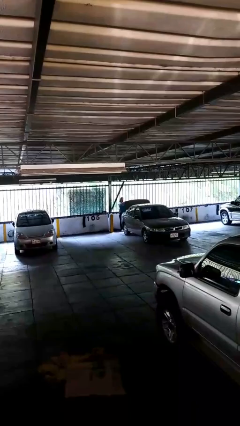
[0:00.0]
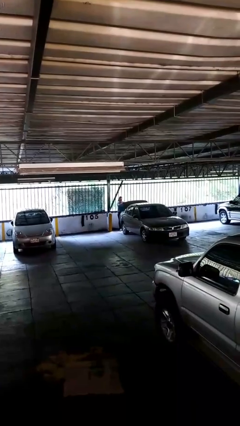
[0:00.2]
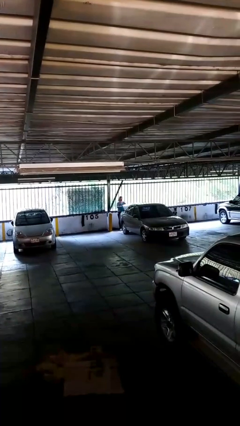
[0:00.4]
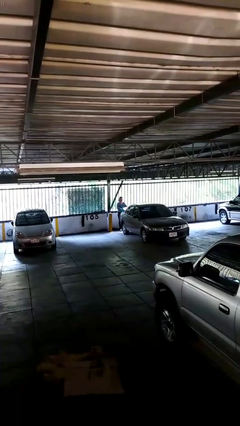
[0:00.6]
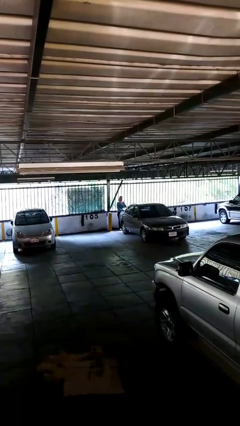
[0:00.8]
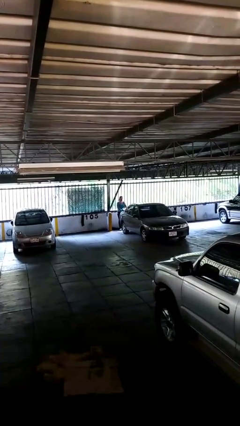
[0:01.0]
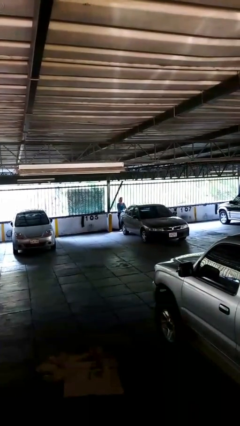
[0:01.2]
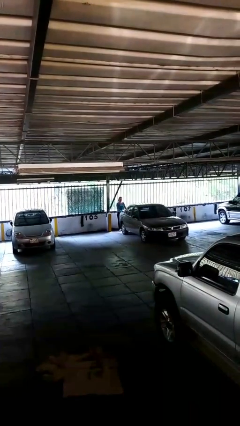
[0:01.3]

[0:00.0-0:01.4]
person closes car trunk

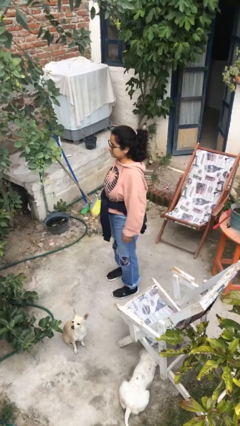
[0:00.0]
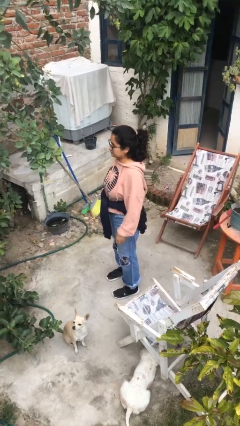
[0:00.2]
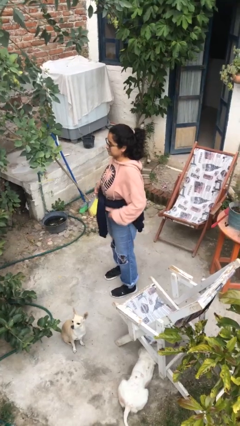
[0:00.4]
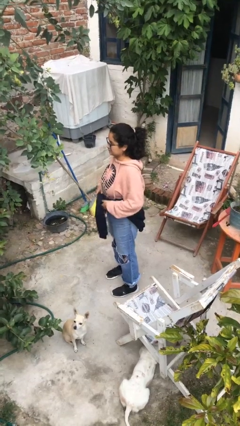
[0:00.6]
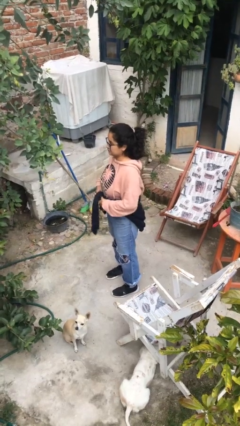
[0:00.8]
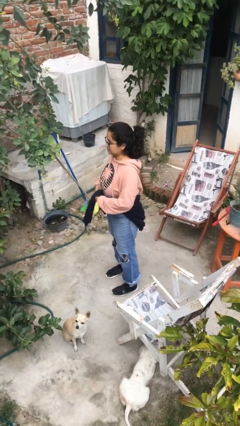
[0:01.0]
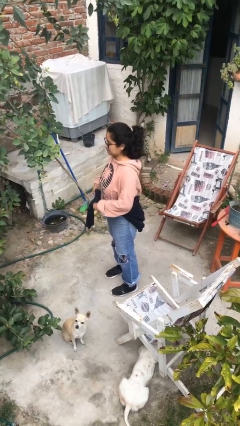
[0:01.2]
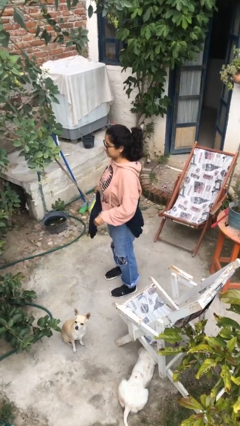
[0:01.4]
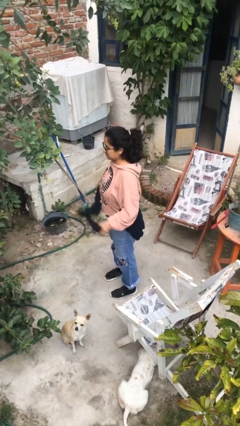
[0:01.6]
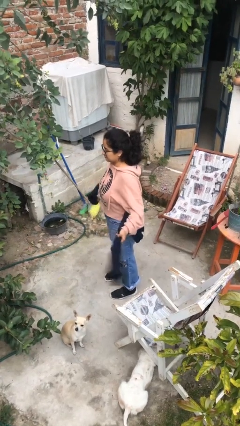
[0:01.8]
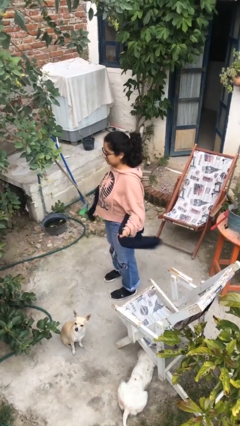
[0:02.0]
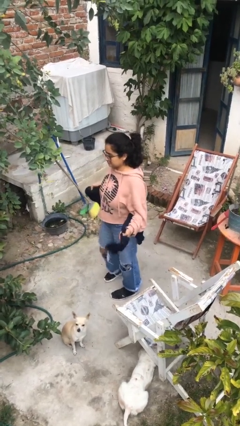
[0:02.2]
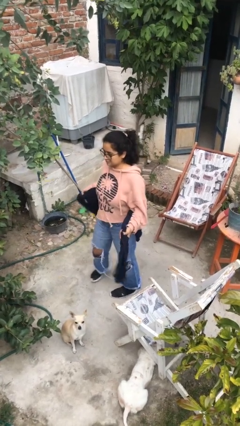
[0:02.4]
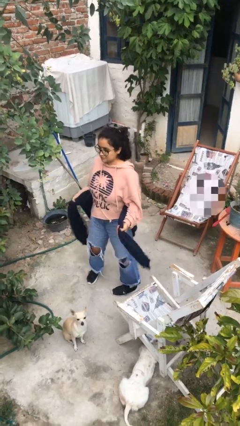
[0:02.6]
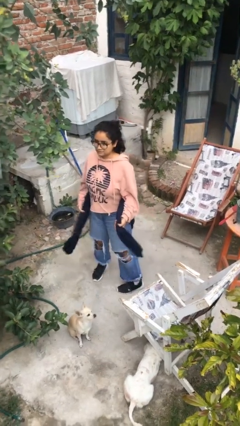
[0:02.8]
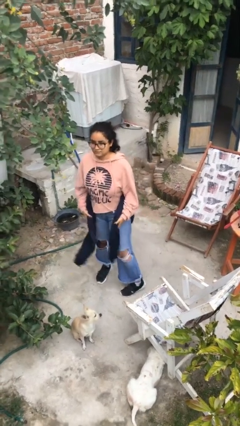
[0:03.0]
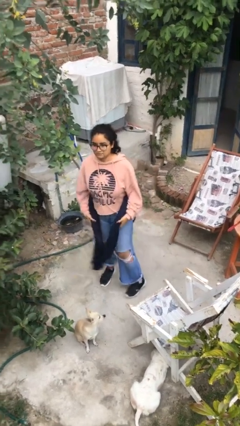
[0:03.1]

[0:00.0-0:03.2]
person unties jacket around waist

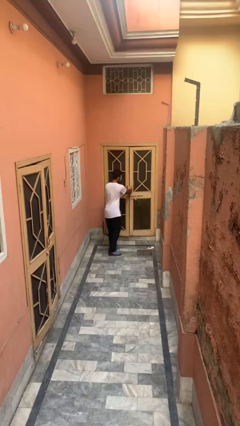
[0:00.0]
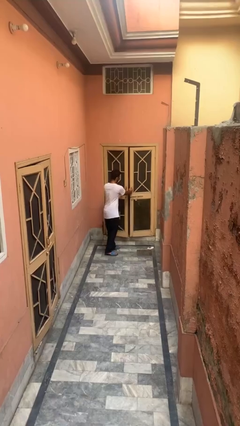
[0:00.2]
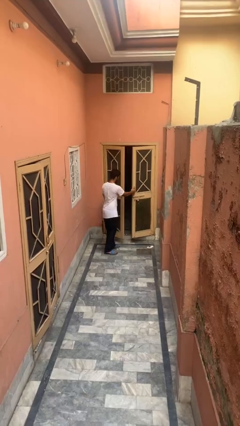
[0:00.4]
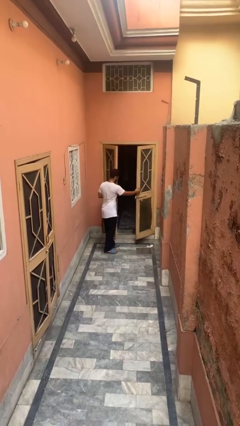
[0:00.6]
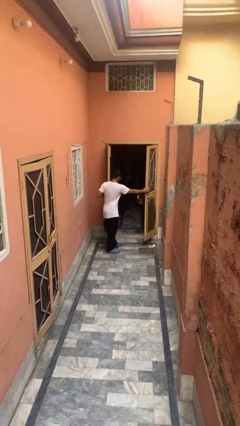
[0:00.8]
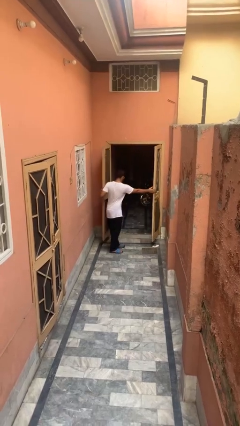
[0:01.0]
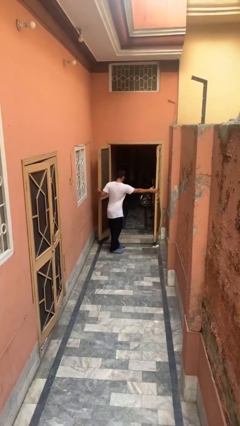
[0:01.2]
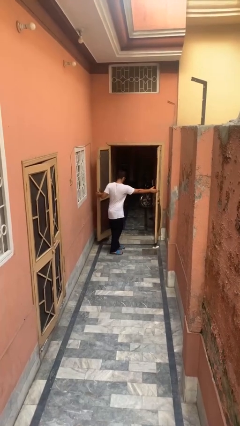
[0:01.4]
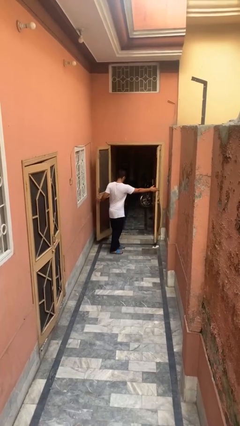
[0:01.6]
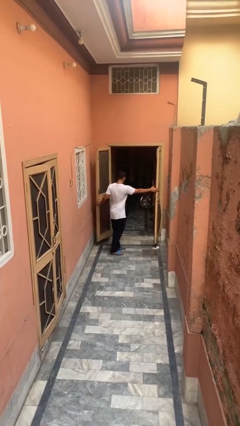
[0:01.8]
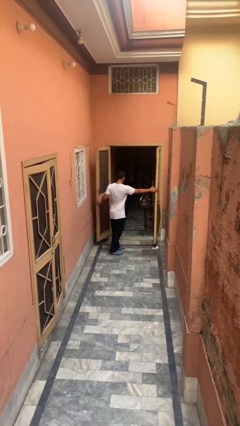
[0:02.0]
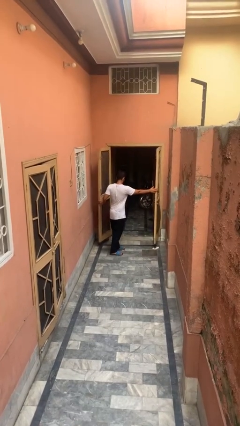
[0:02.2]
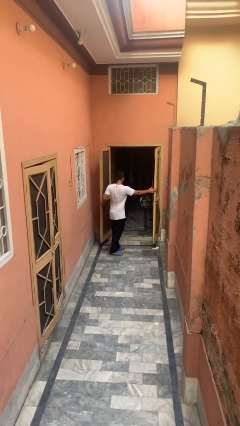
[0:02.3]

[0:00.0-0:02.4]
person opens gate

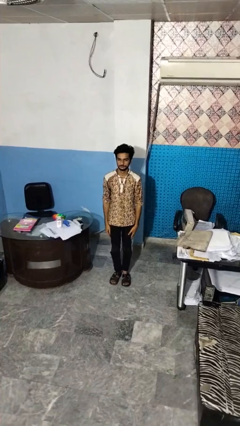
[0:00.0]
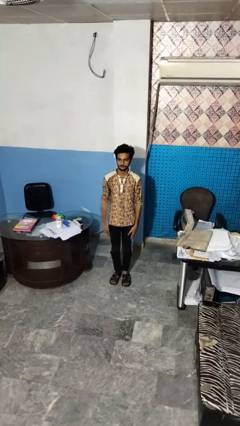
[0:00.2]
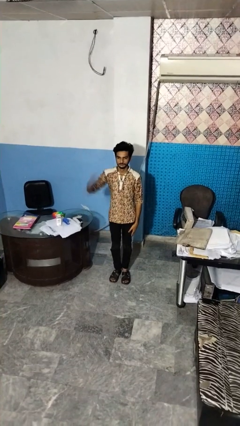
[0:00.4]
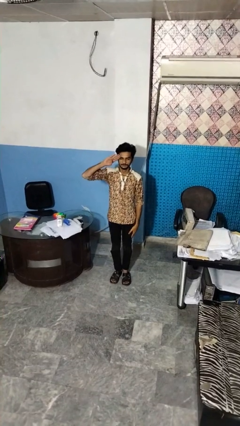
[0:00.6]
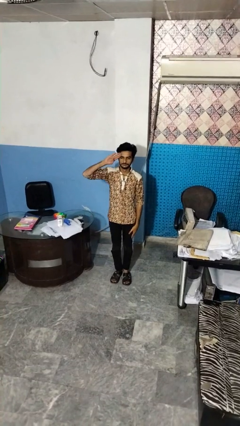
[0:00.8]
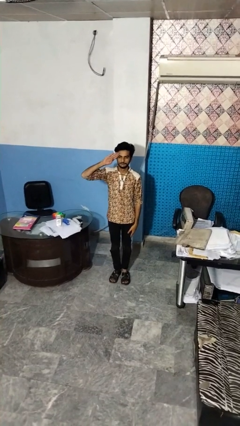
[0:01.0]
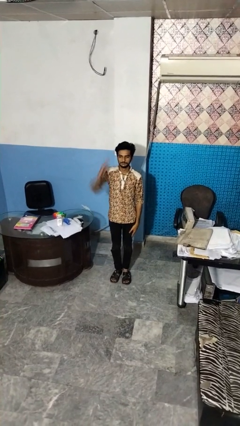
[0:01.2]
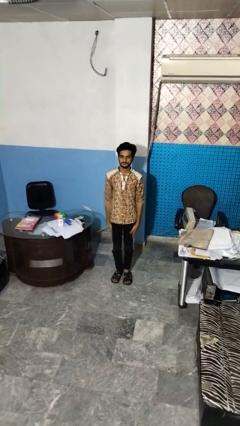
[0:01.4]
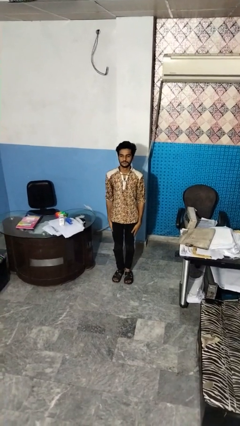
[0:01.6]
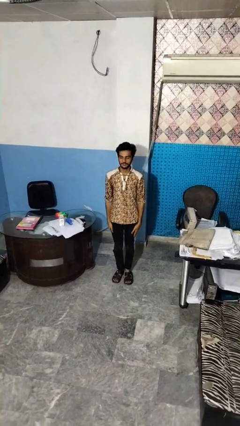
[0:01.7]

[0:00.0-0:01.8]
person salutes

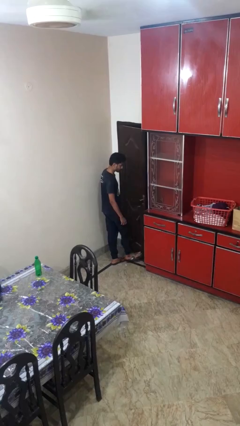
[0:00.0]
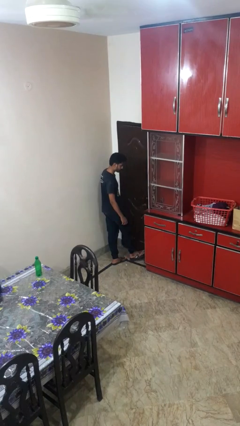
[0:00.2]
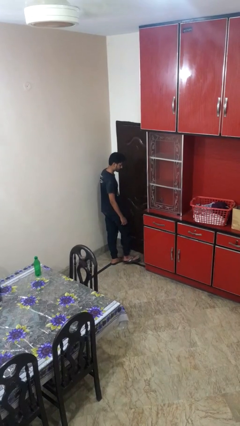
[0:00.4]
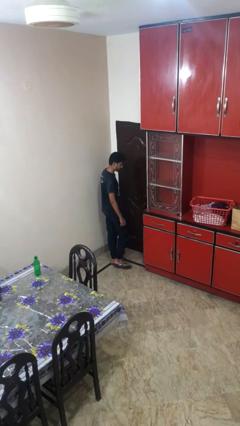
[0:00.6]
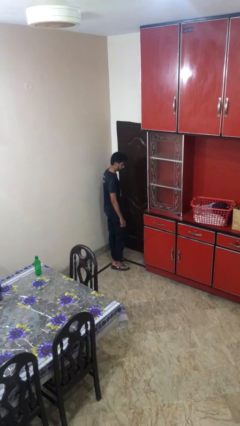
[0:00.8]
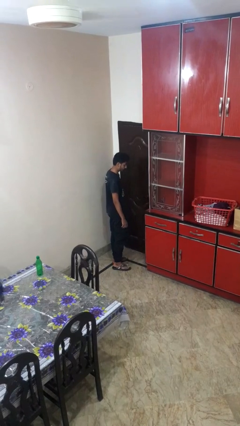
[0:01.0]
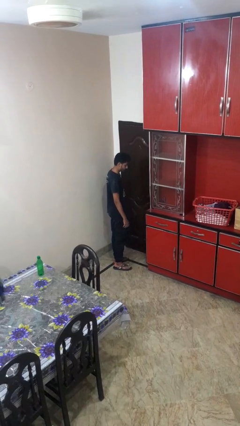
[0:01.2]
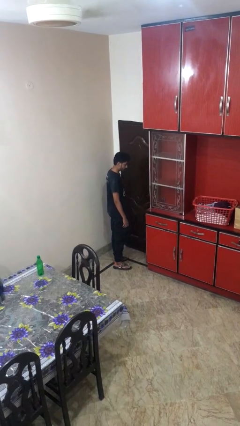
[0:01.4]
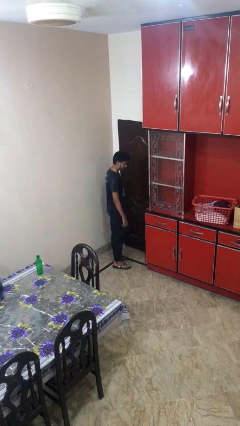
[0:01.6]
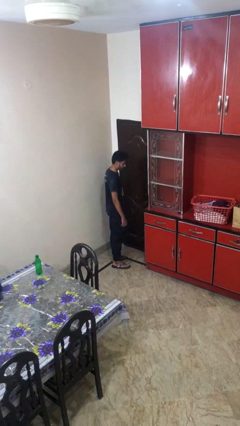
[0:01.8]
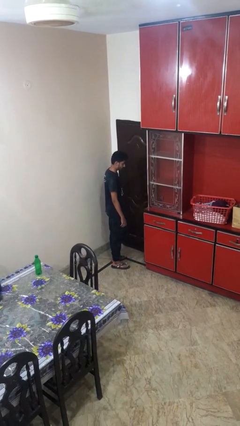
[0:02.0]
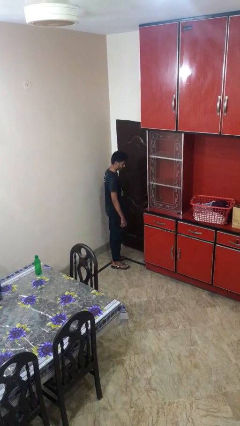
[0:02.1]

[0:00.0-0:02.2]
person closes door with foot

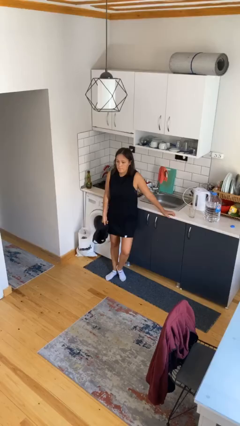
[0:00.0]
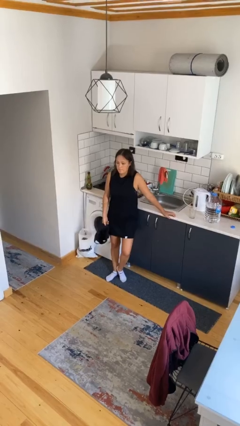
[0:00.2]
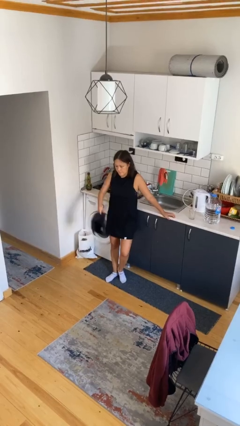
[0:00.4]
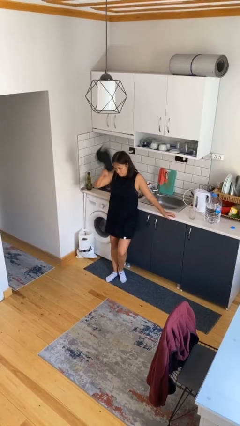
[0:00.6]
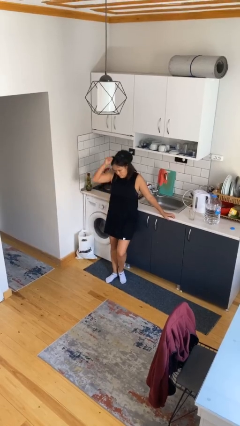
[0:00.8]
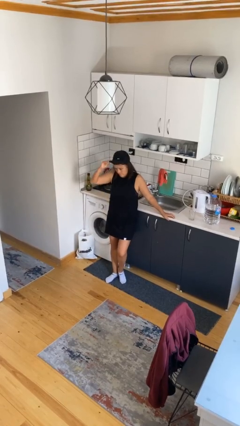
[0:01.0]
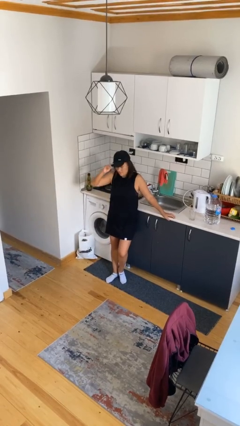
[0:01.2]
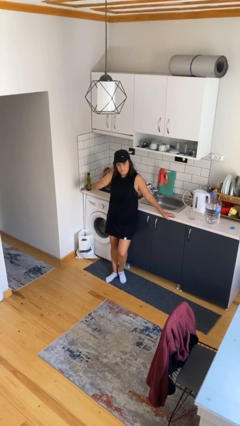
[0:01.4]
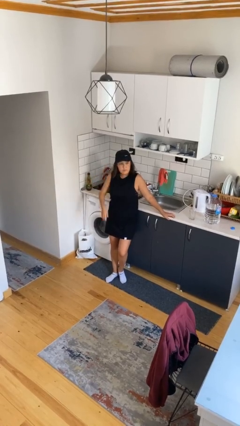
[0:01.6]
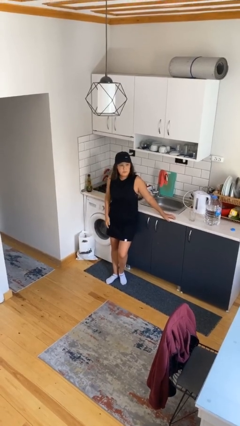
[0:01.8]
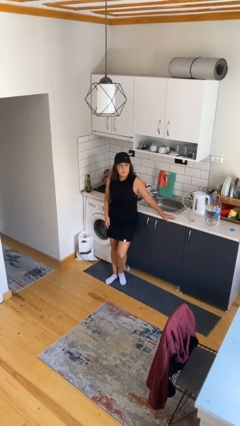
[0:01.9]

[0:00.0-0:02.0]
person puts on hat

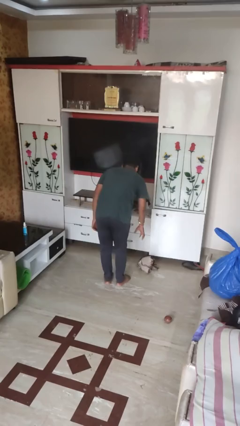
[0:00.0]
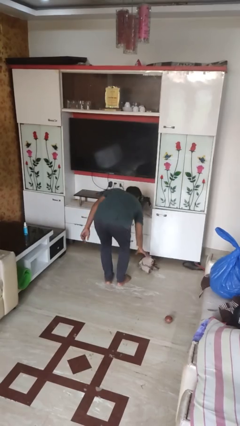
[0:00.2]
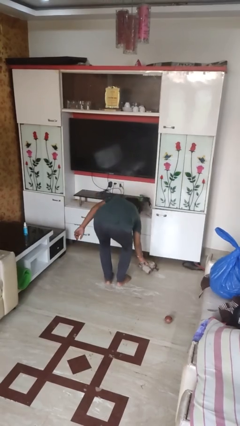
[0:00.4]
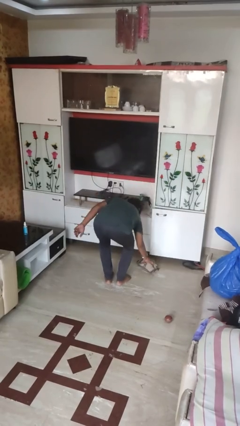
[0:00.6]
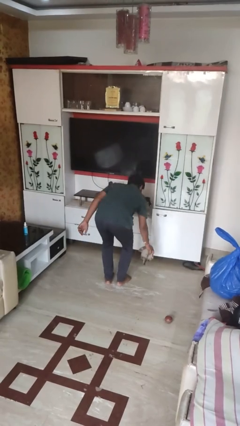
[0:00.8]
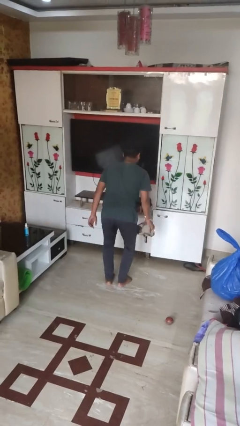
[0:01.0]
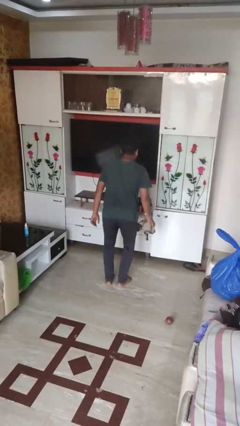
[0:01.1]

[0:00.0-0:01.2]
person picks up object from floor

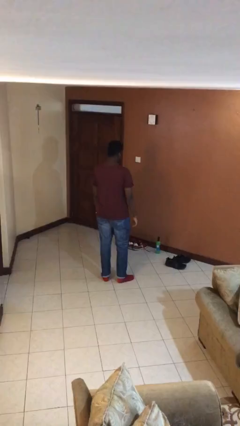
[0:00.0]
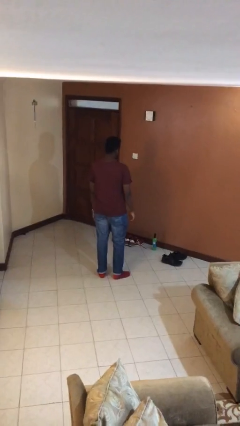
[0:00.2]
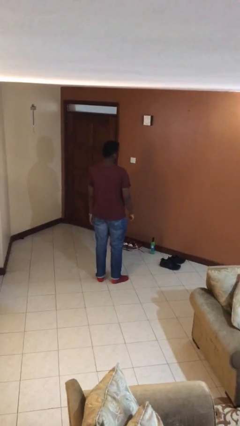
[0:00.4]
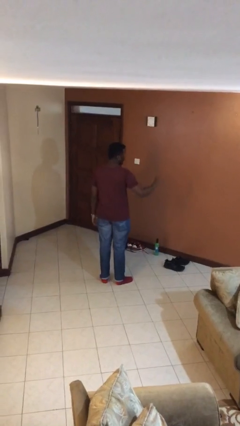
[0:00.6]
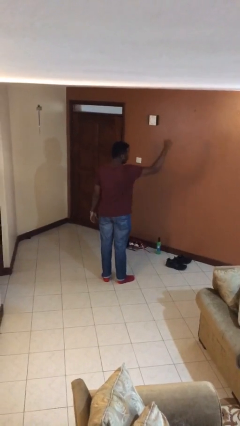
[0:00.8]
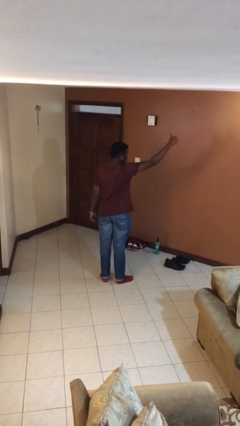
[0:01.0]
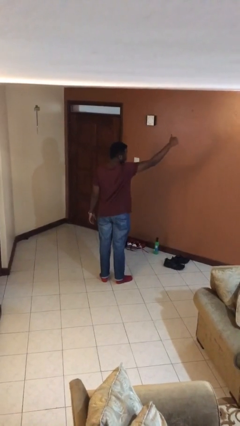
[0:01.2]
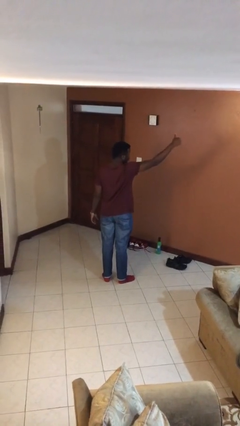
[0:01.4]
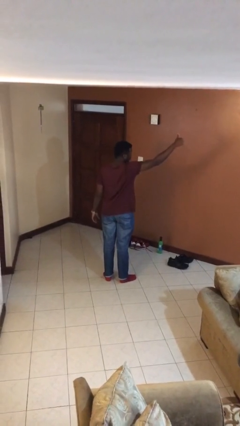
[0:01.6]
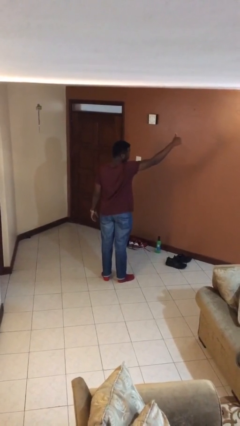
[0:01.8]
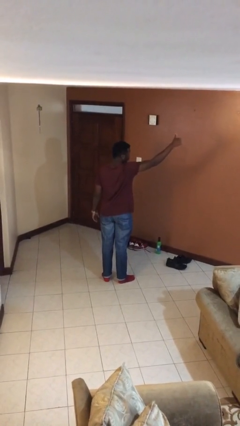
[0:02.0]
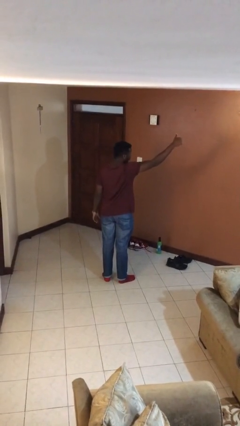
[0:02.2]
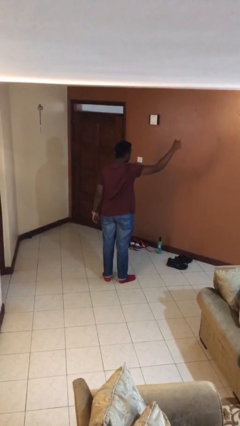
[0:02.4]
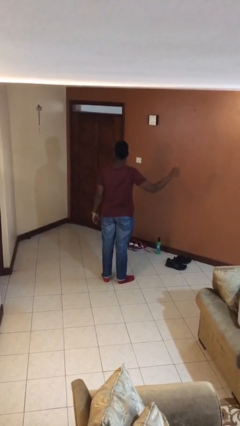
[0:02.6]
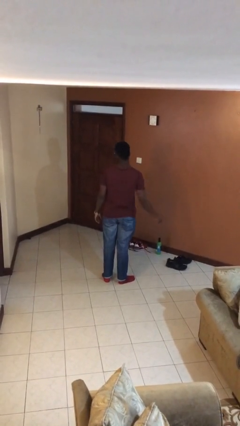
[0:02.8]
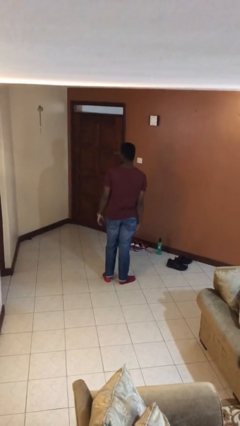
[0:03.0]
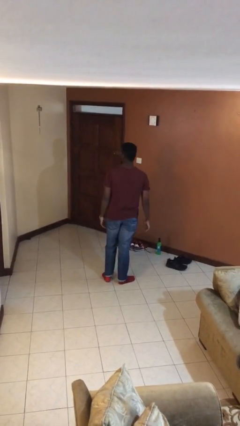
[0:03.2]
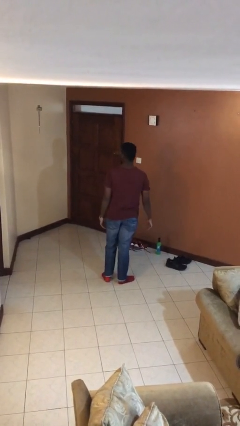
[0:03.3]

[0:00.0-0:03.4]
person gestures thumbs up
